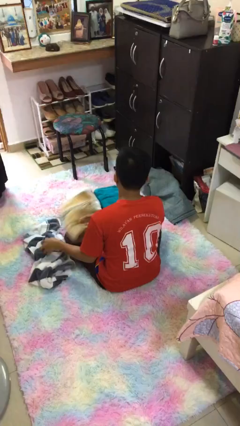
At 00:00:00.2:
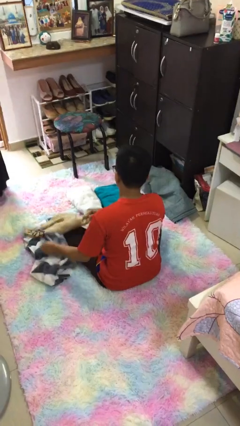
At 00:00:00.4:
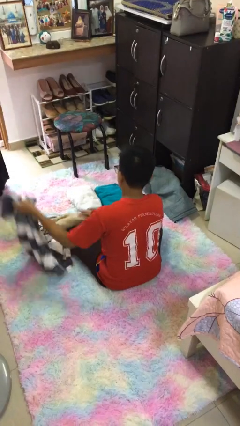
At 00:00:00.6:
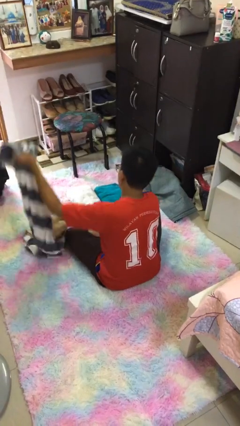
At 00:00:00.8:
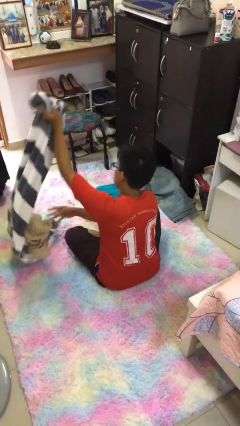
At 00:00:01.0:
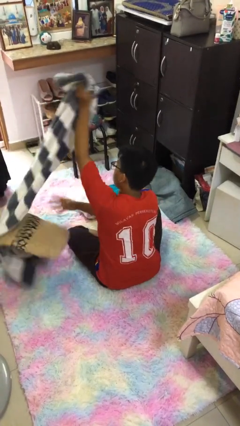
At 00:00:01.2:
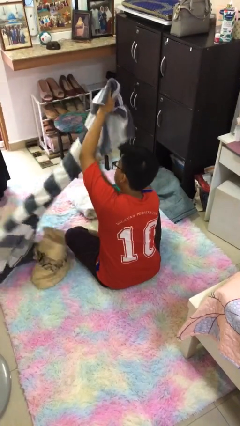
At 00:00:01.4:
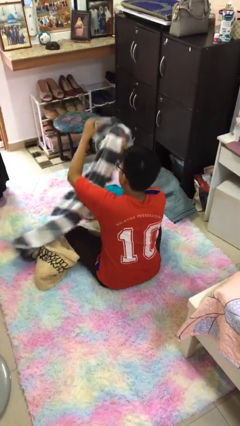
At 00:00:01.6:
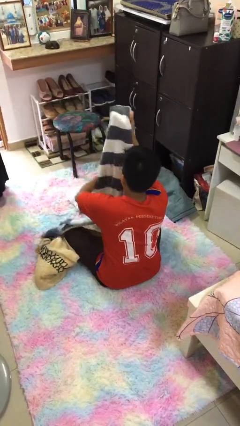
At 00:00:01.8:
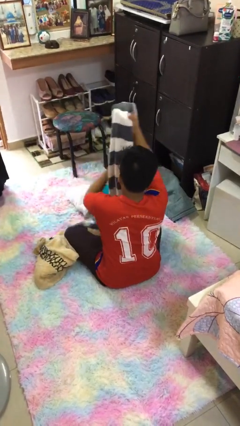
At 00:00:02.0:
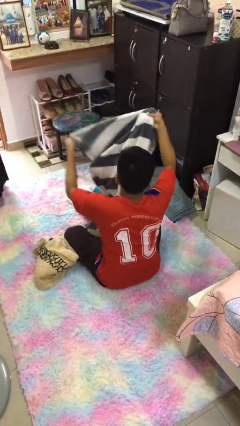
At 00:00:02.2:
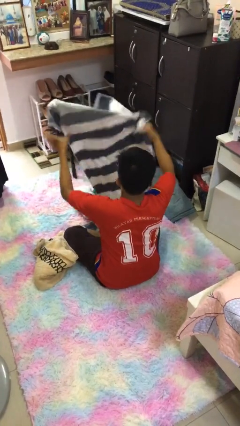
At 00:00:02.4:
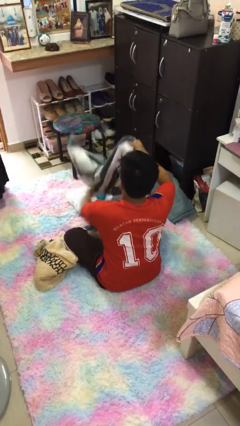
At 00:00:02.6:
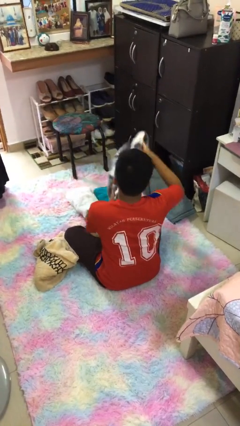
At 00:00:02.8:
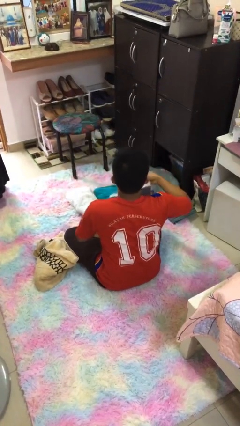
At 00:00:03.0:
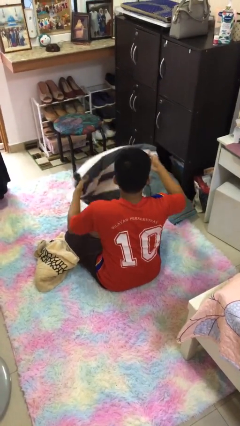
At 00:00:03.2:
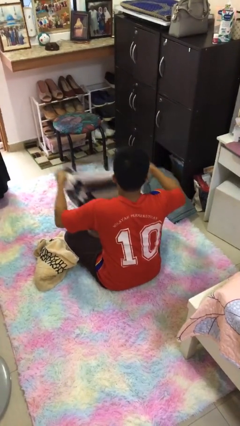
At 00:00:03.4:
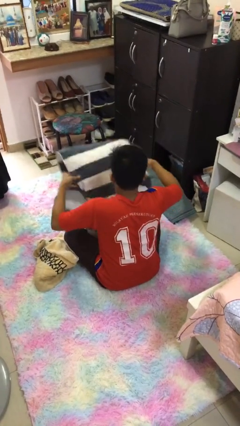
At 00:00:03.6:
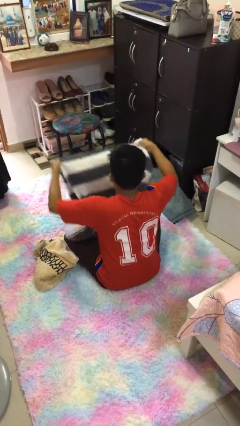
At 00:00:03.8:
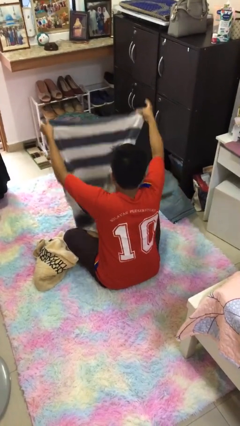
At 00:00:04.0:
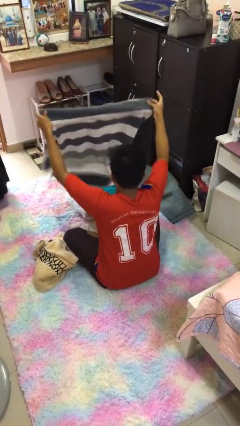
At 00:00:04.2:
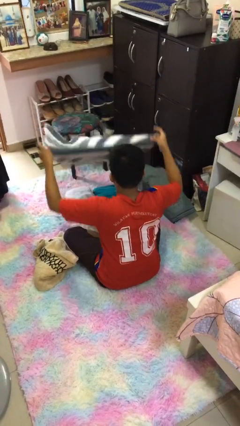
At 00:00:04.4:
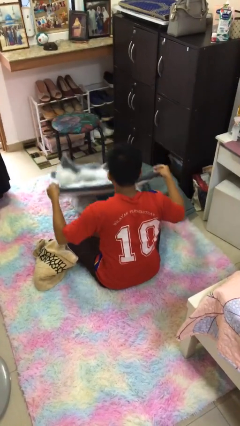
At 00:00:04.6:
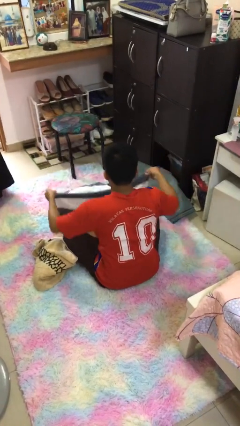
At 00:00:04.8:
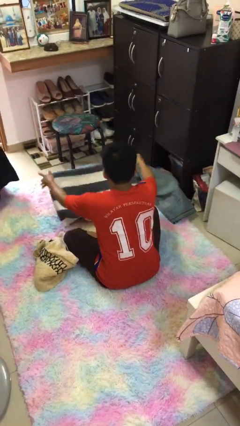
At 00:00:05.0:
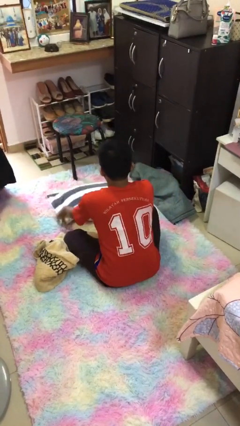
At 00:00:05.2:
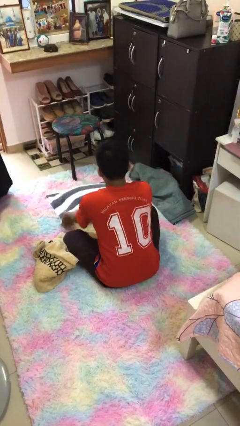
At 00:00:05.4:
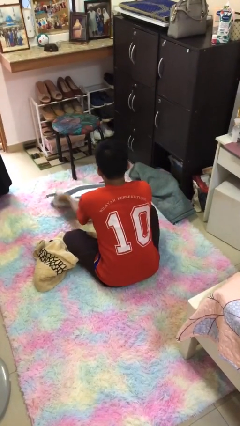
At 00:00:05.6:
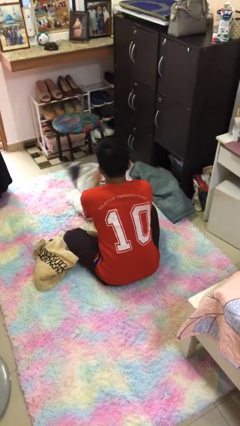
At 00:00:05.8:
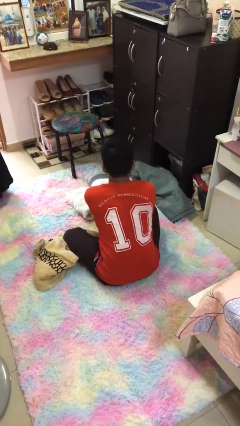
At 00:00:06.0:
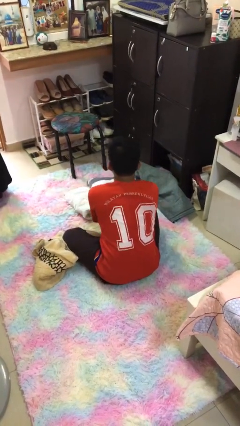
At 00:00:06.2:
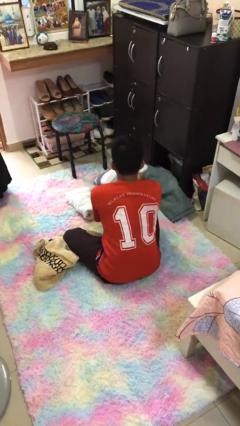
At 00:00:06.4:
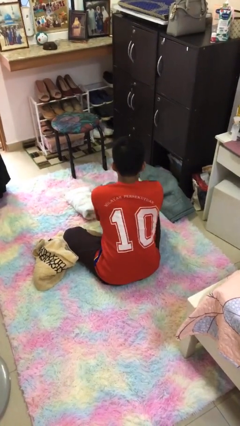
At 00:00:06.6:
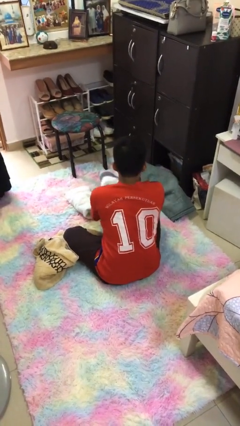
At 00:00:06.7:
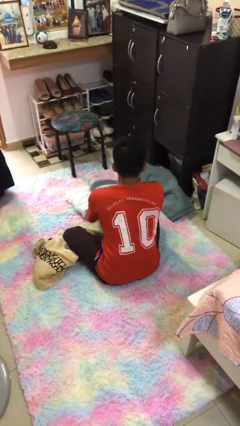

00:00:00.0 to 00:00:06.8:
person folds towel

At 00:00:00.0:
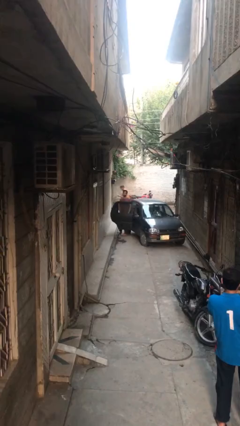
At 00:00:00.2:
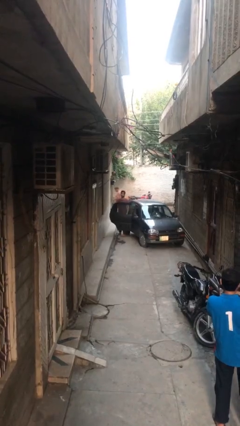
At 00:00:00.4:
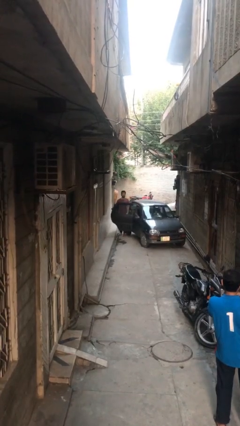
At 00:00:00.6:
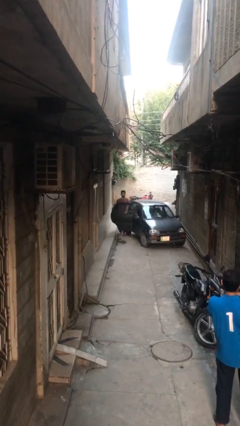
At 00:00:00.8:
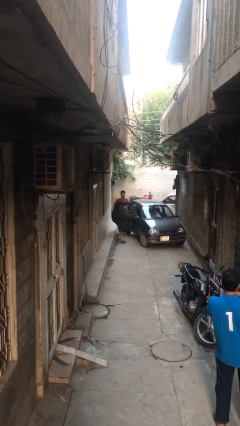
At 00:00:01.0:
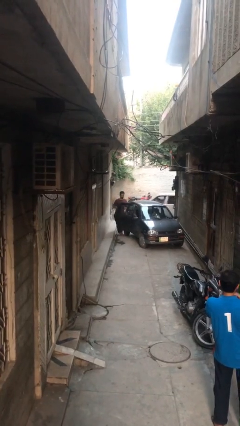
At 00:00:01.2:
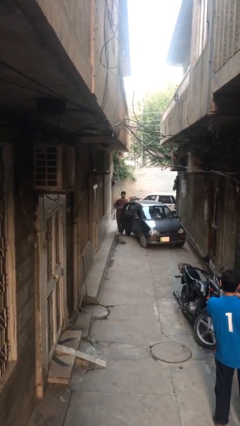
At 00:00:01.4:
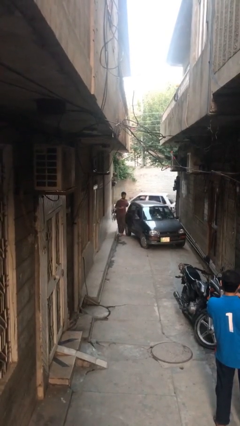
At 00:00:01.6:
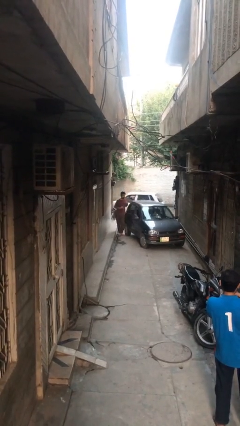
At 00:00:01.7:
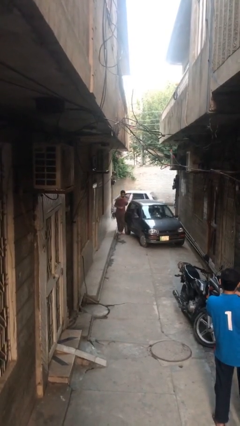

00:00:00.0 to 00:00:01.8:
person closes car door

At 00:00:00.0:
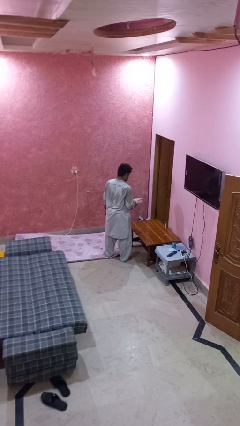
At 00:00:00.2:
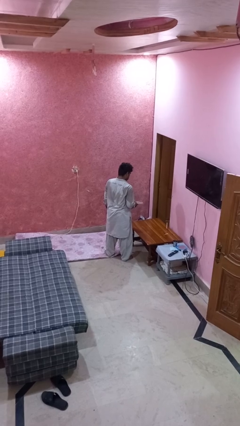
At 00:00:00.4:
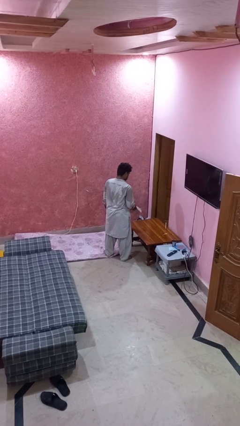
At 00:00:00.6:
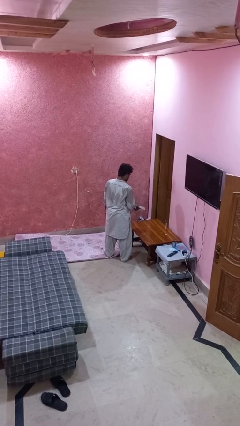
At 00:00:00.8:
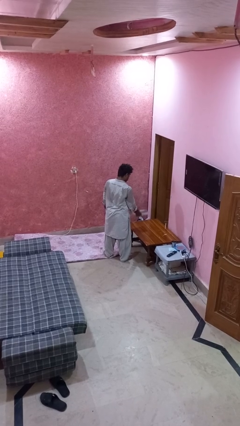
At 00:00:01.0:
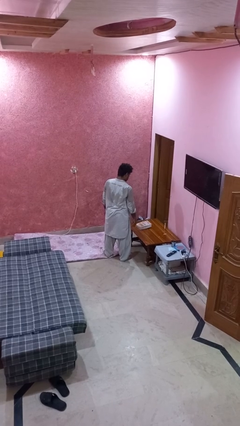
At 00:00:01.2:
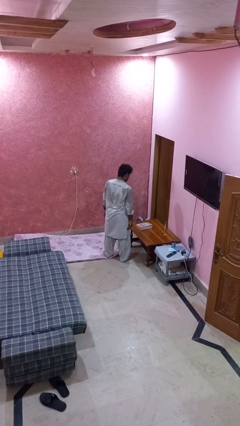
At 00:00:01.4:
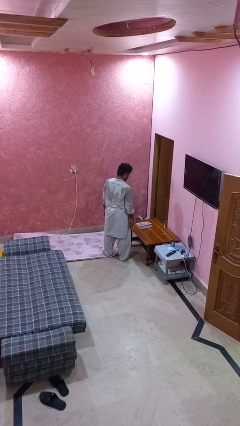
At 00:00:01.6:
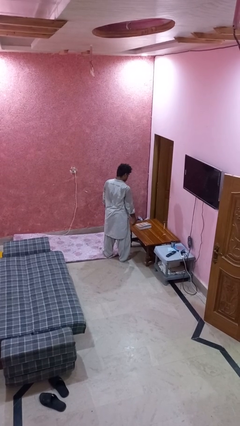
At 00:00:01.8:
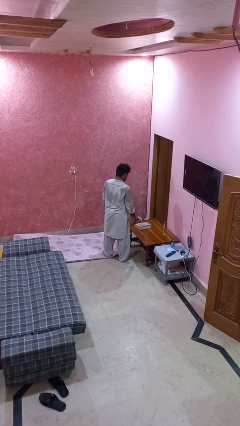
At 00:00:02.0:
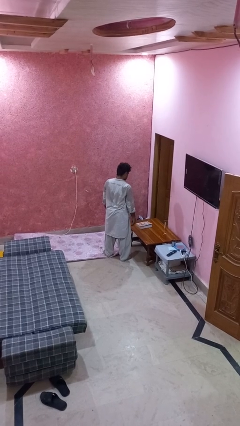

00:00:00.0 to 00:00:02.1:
person throws object on table

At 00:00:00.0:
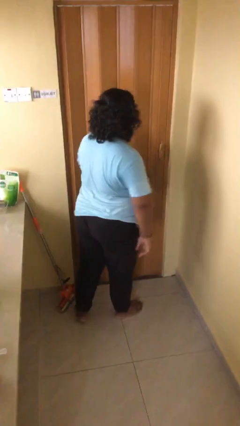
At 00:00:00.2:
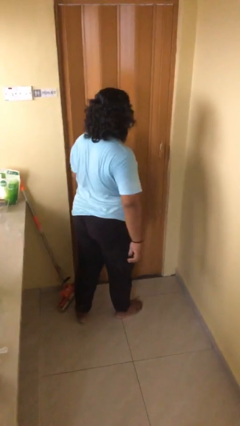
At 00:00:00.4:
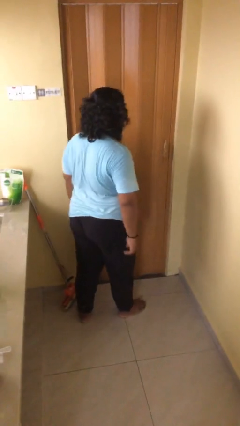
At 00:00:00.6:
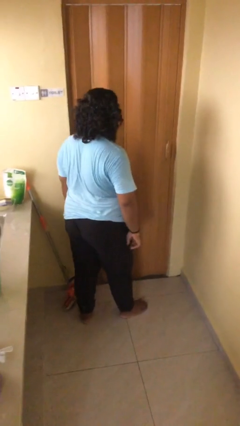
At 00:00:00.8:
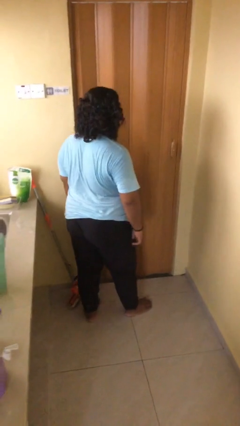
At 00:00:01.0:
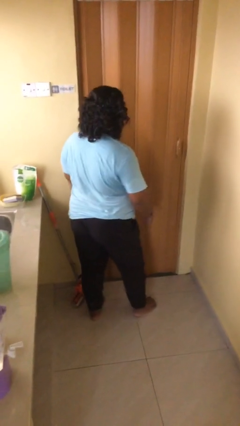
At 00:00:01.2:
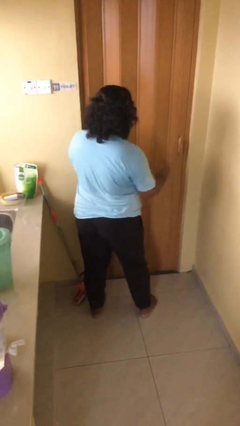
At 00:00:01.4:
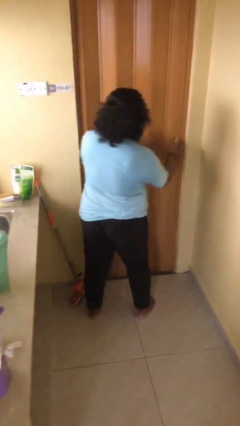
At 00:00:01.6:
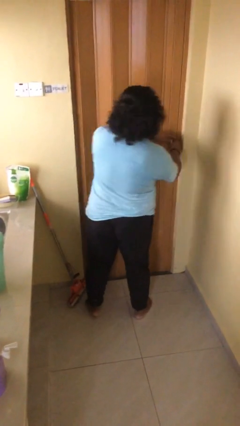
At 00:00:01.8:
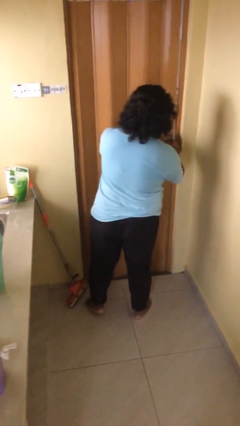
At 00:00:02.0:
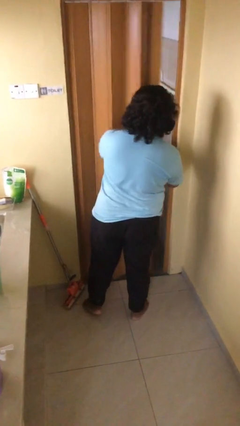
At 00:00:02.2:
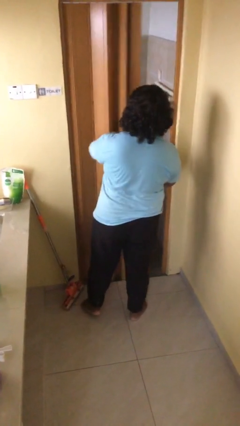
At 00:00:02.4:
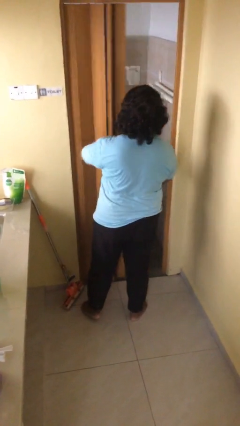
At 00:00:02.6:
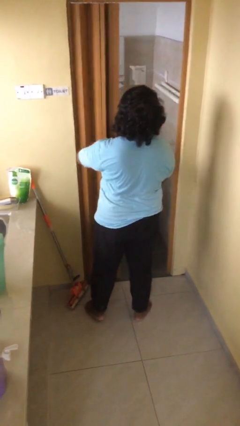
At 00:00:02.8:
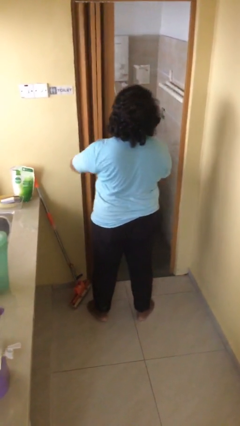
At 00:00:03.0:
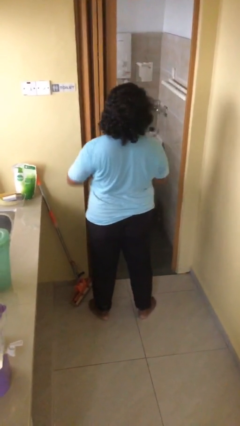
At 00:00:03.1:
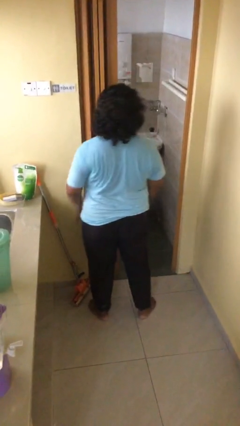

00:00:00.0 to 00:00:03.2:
person opens sliding door

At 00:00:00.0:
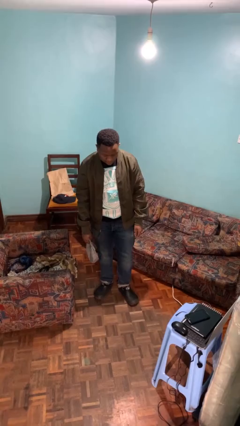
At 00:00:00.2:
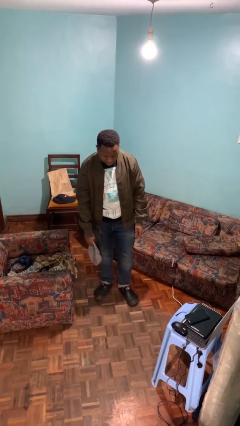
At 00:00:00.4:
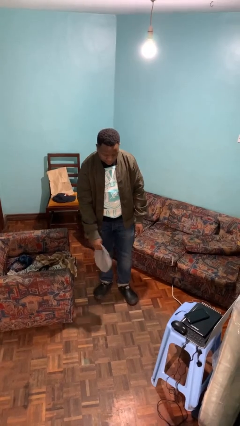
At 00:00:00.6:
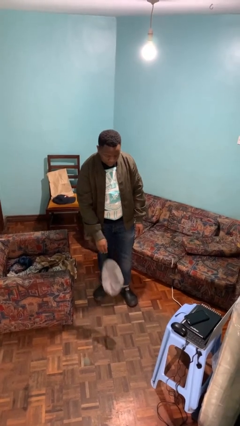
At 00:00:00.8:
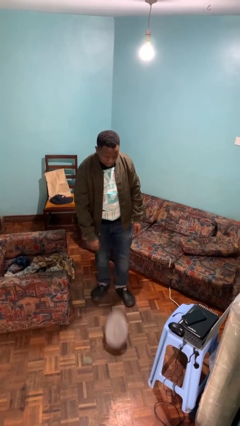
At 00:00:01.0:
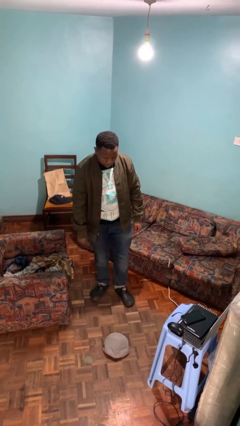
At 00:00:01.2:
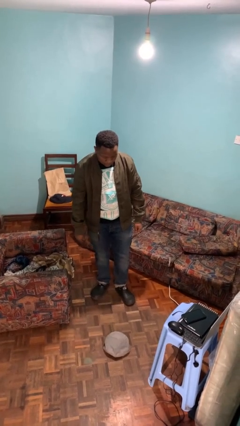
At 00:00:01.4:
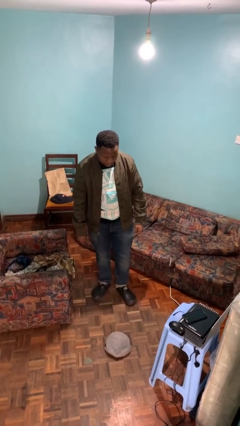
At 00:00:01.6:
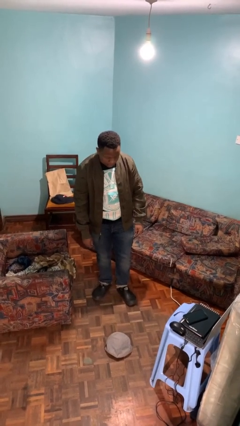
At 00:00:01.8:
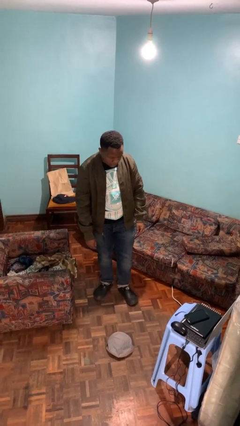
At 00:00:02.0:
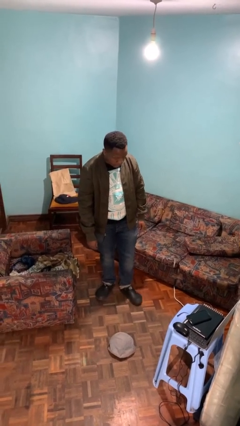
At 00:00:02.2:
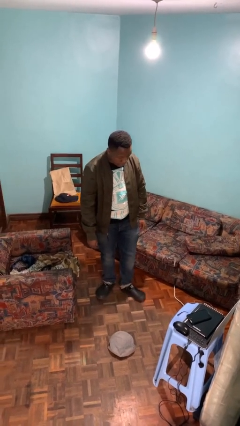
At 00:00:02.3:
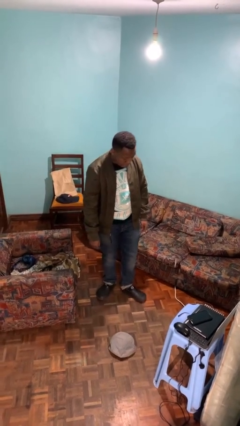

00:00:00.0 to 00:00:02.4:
person drops object

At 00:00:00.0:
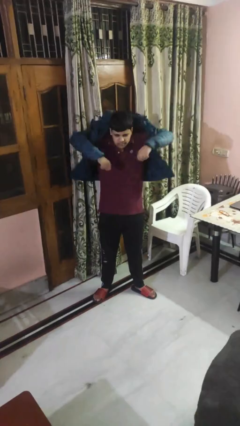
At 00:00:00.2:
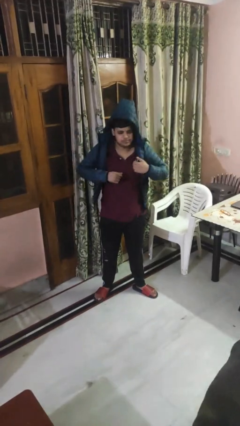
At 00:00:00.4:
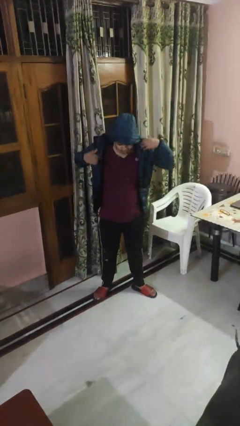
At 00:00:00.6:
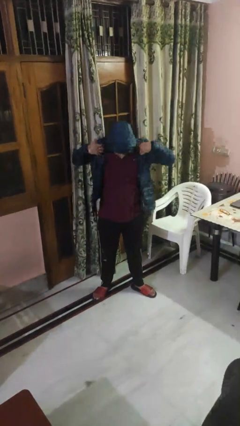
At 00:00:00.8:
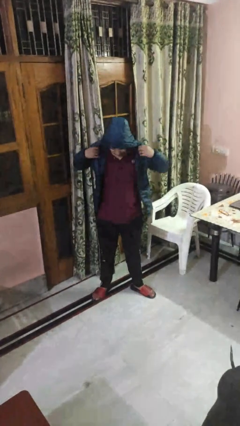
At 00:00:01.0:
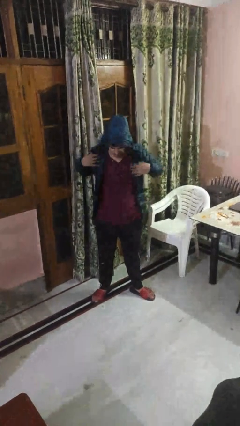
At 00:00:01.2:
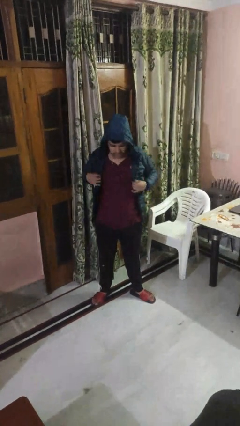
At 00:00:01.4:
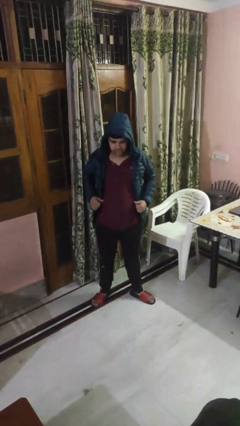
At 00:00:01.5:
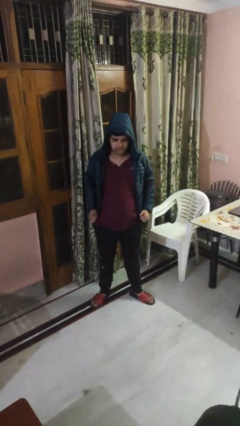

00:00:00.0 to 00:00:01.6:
person puts on hoodie
